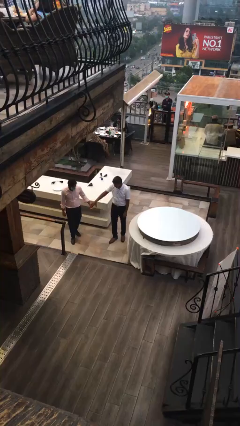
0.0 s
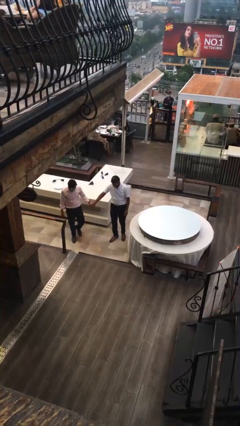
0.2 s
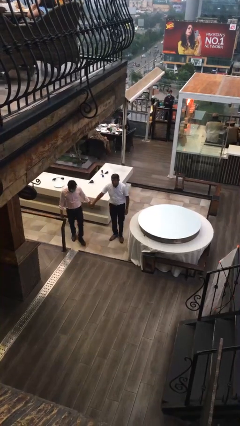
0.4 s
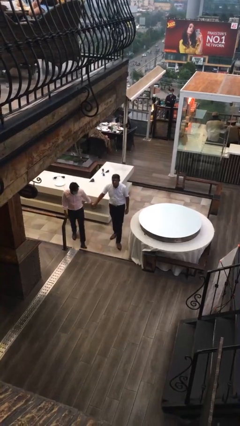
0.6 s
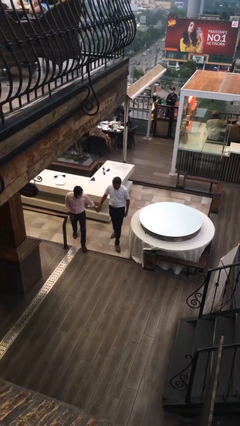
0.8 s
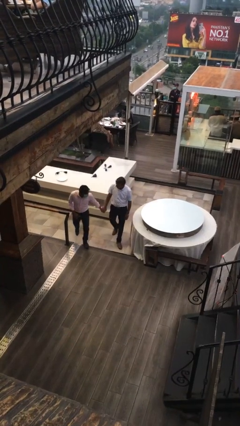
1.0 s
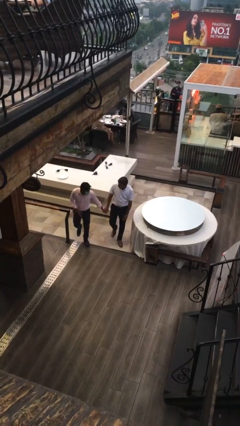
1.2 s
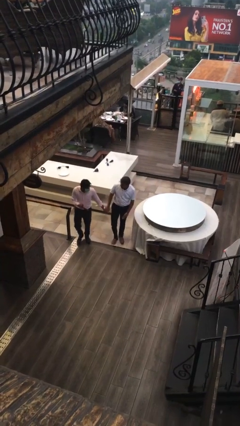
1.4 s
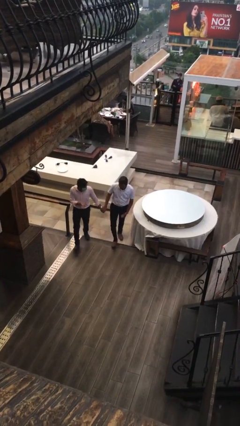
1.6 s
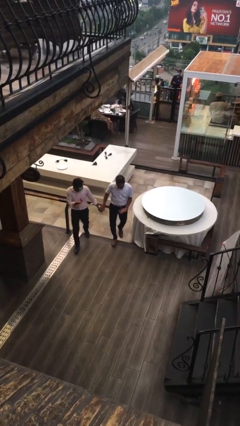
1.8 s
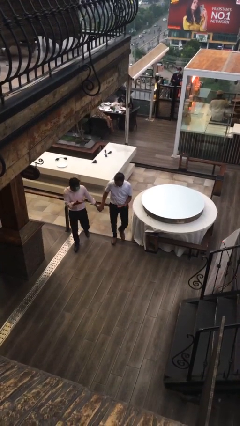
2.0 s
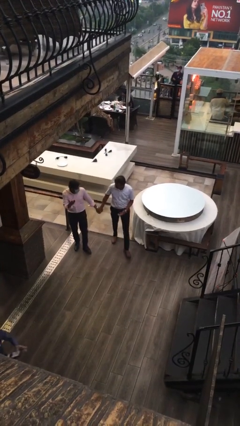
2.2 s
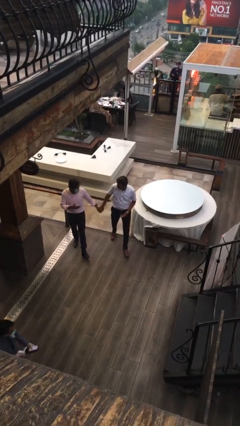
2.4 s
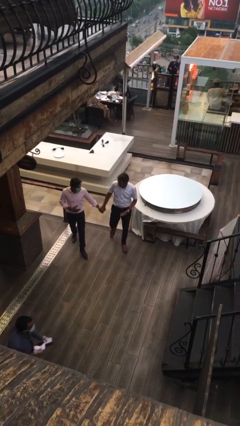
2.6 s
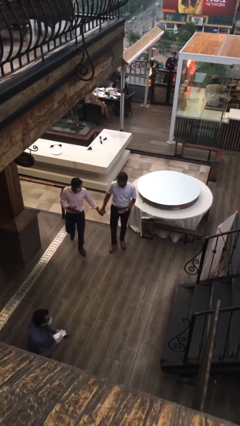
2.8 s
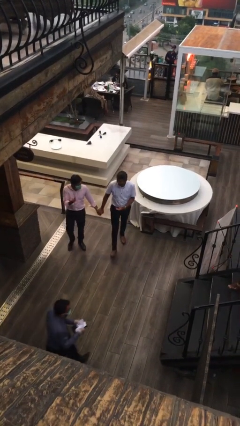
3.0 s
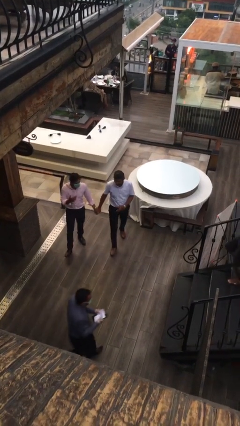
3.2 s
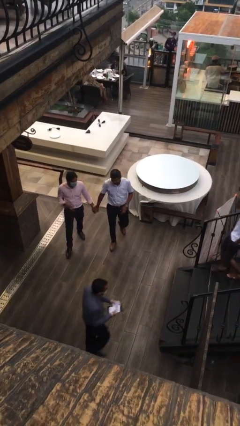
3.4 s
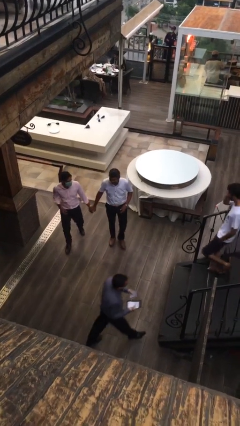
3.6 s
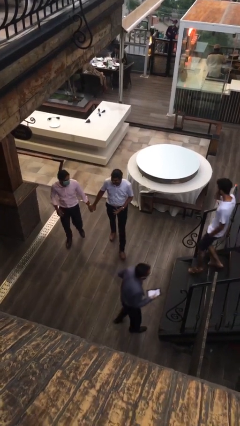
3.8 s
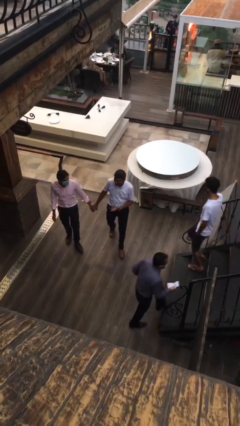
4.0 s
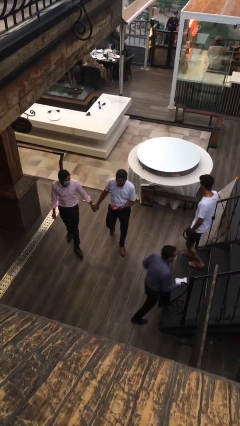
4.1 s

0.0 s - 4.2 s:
person holds hand

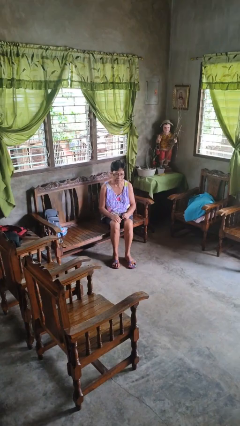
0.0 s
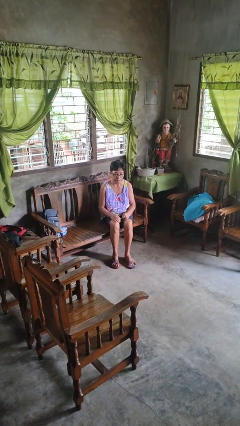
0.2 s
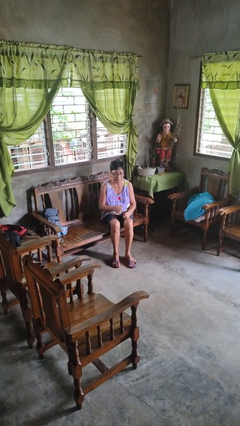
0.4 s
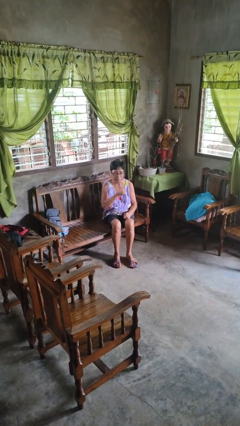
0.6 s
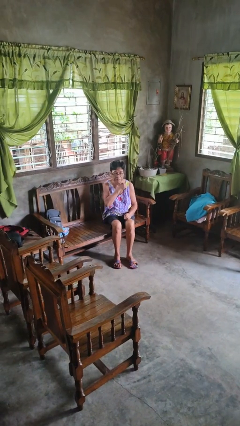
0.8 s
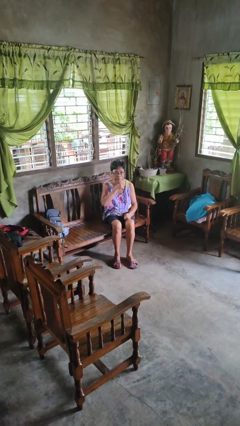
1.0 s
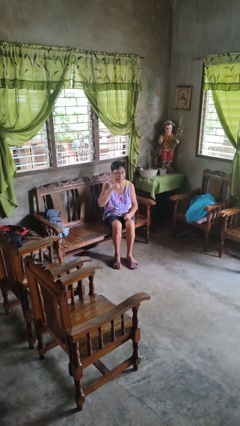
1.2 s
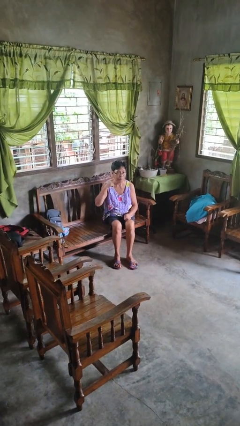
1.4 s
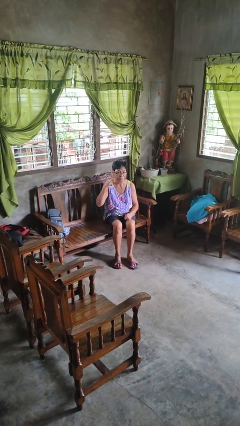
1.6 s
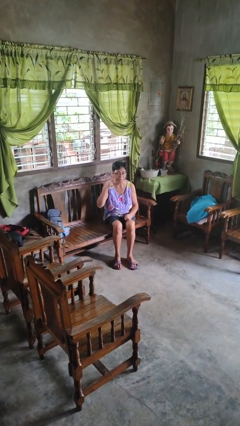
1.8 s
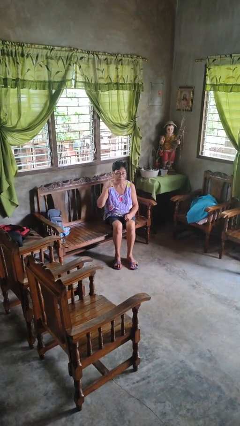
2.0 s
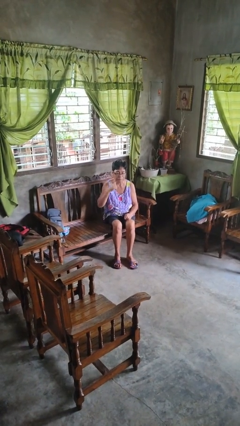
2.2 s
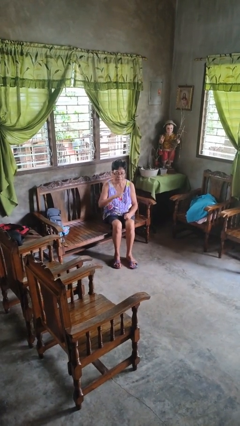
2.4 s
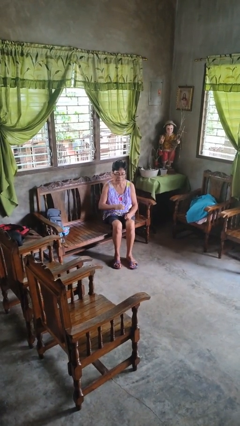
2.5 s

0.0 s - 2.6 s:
person gestures cut

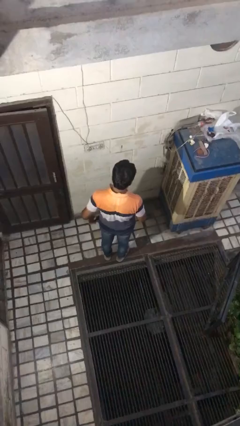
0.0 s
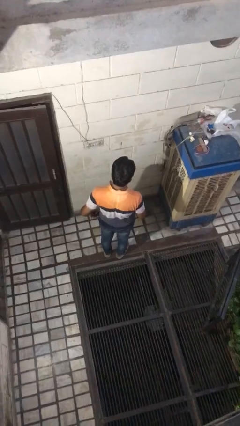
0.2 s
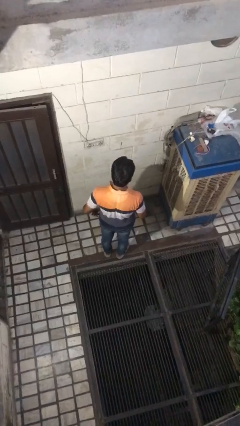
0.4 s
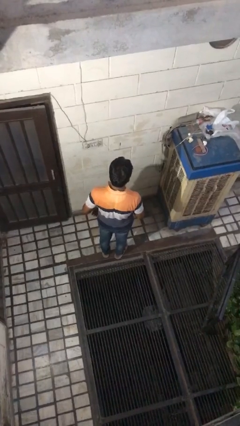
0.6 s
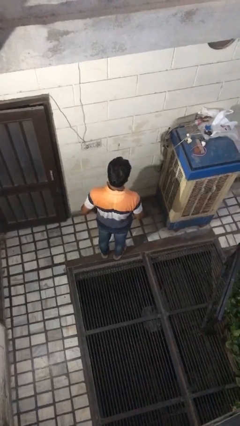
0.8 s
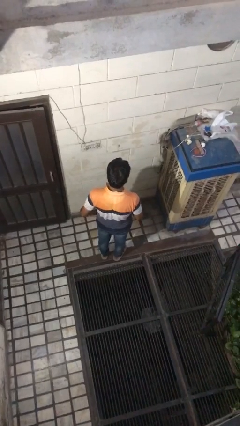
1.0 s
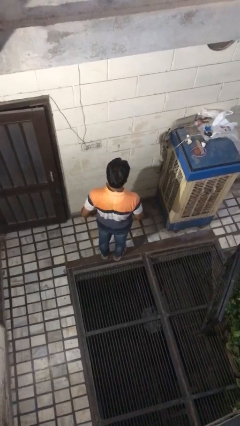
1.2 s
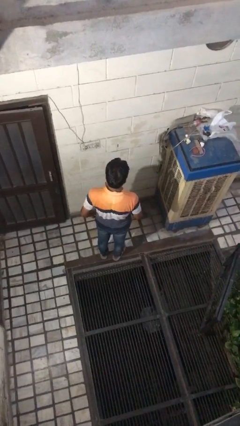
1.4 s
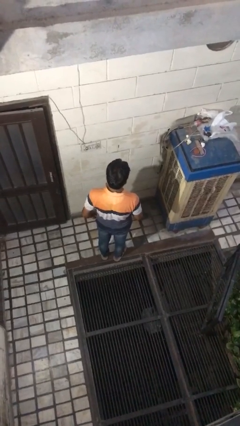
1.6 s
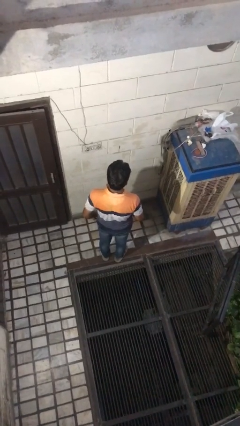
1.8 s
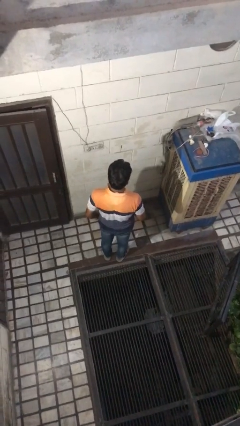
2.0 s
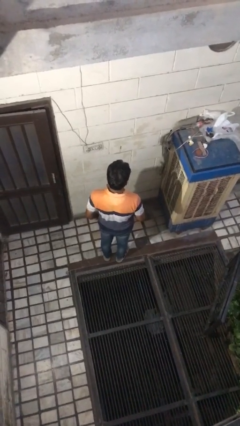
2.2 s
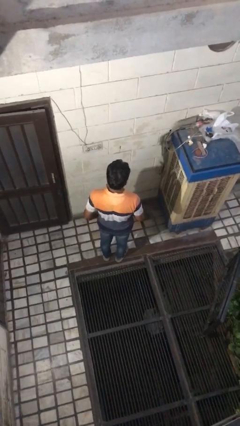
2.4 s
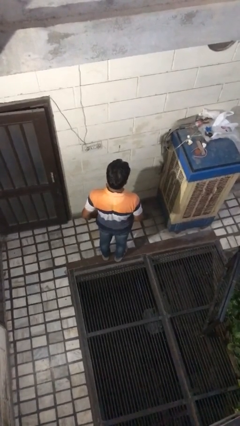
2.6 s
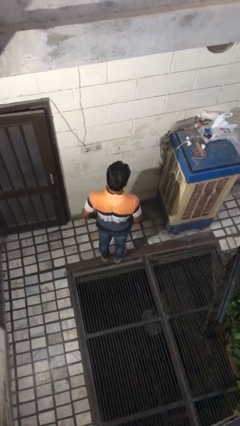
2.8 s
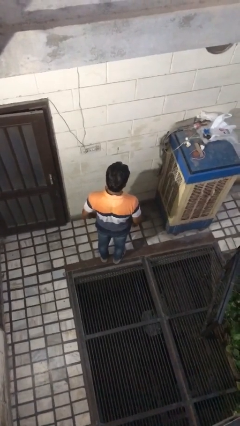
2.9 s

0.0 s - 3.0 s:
person puts phone into pocket

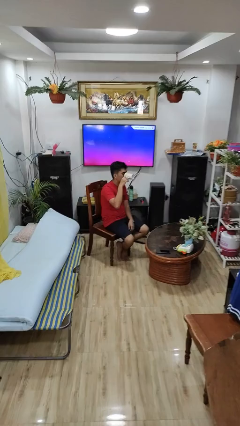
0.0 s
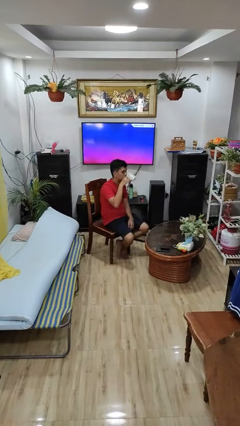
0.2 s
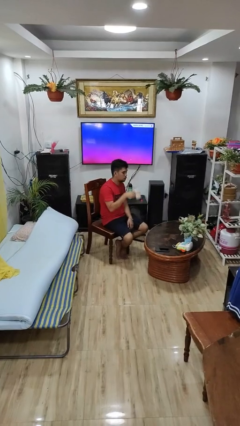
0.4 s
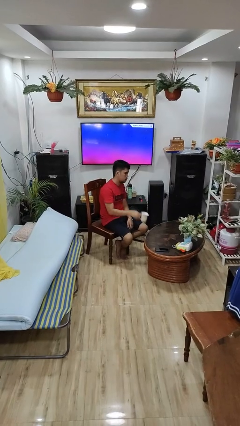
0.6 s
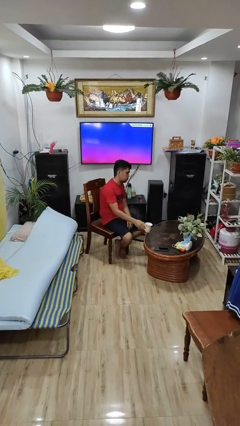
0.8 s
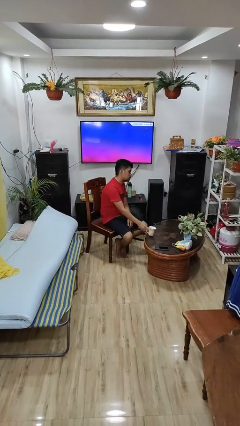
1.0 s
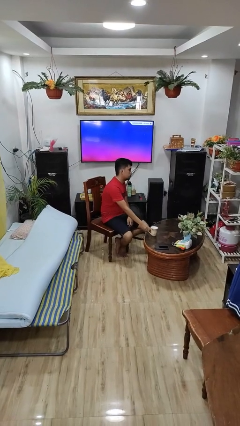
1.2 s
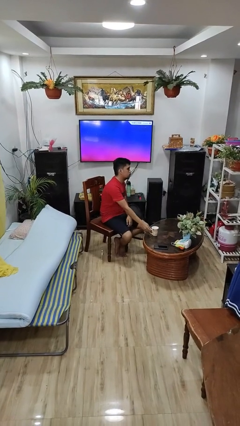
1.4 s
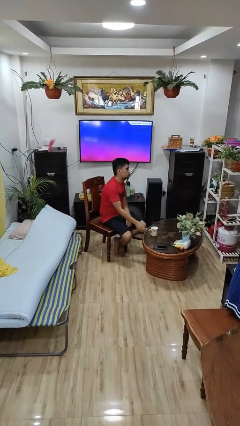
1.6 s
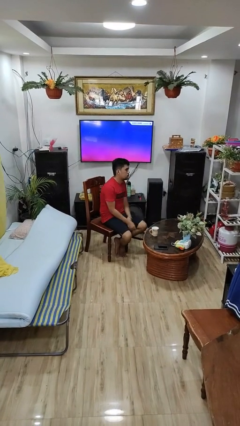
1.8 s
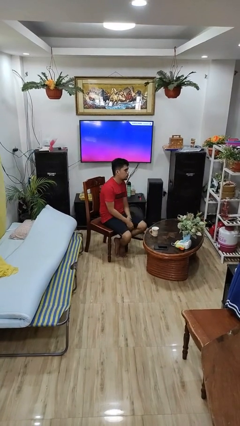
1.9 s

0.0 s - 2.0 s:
person puts down object on table

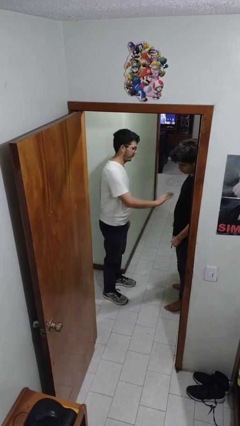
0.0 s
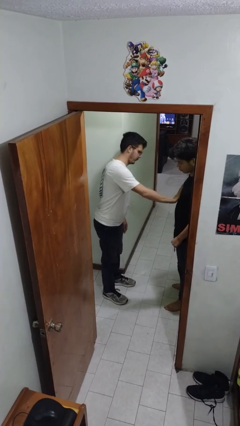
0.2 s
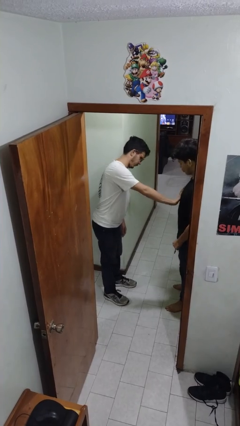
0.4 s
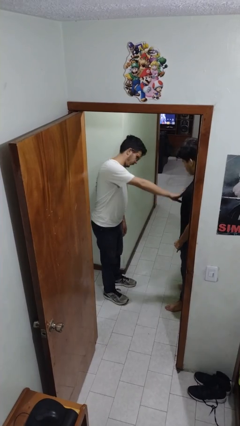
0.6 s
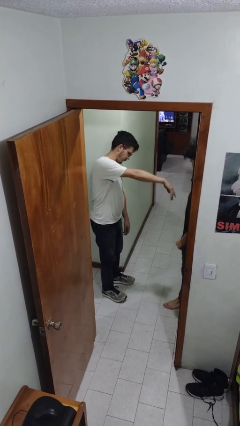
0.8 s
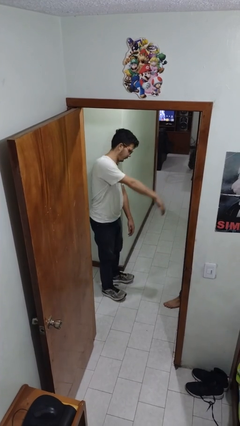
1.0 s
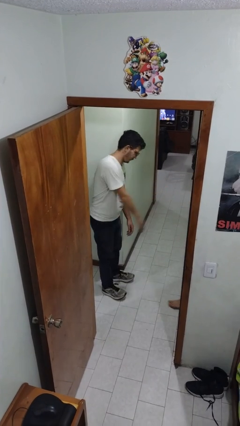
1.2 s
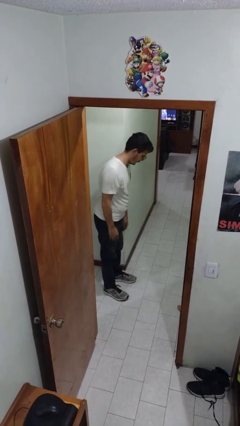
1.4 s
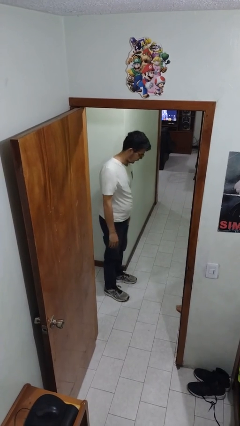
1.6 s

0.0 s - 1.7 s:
person shoves person

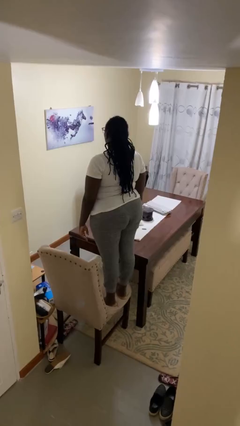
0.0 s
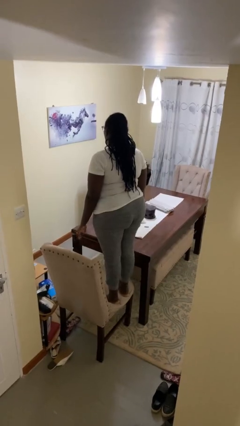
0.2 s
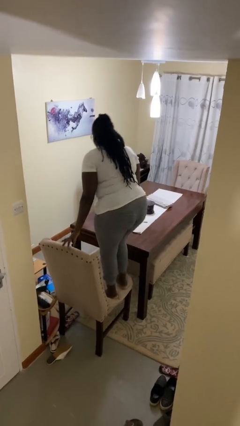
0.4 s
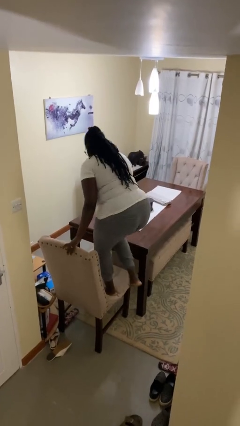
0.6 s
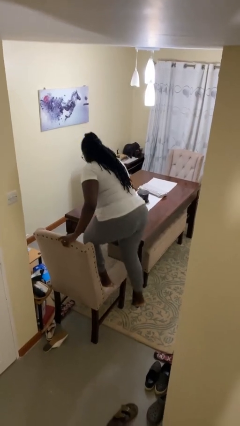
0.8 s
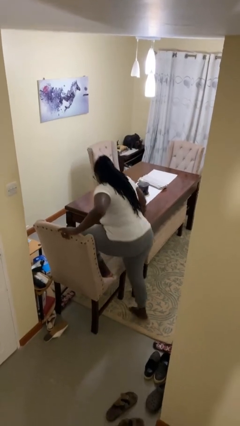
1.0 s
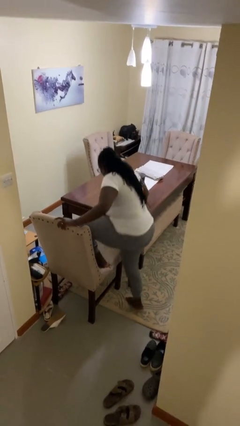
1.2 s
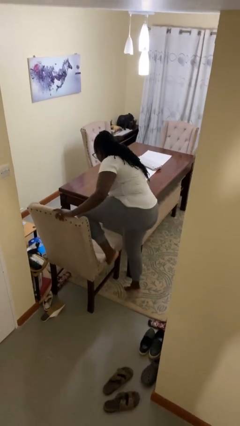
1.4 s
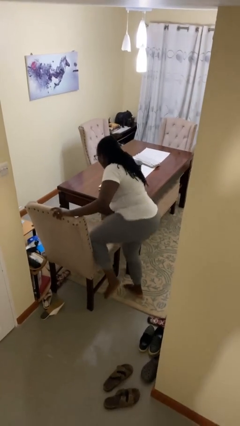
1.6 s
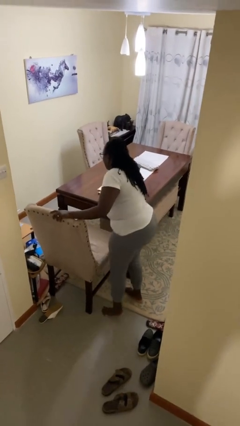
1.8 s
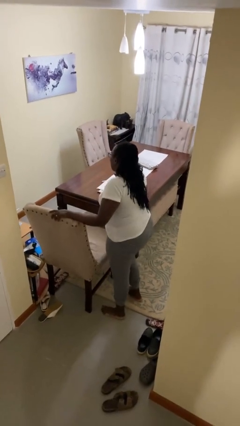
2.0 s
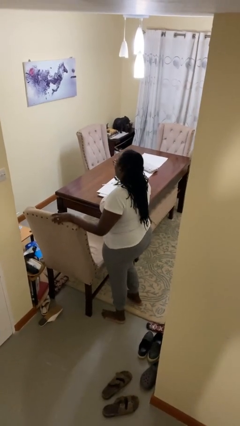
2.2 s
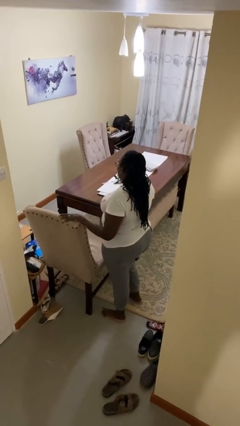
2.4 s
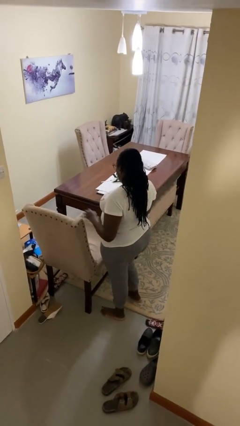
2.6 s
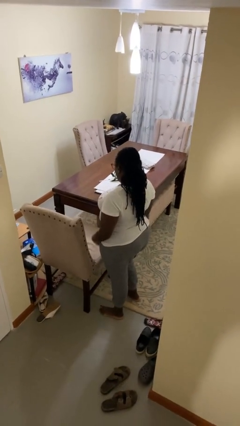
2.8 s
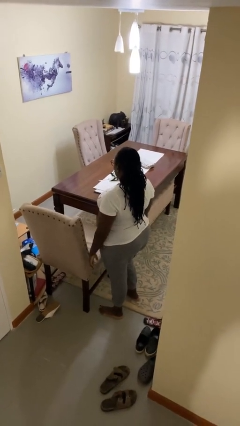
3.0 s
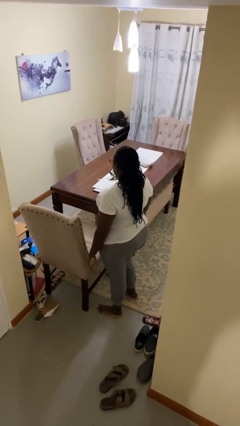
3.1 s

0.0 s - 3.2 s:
person climbs off chair

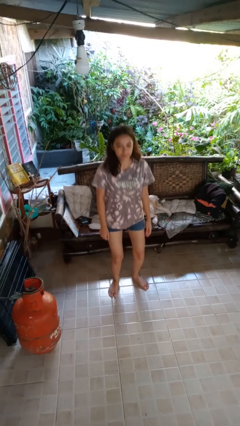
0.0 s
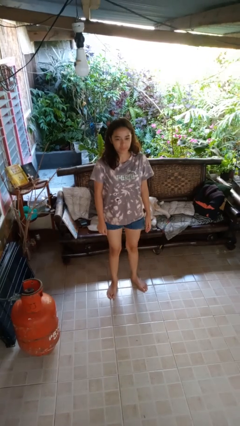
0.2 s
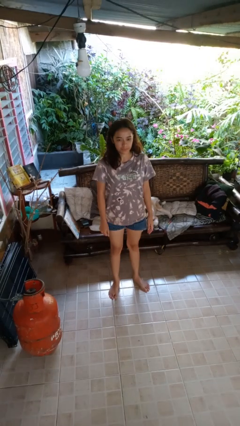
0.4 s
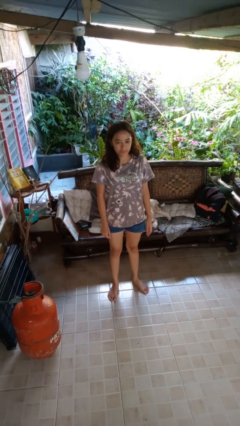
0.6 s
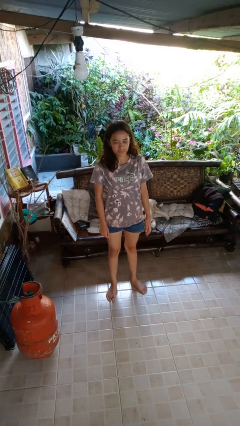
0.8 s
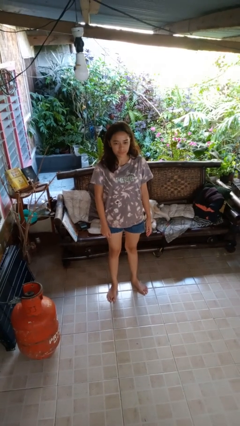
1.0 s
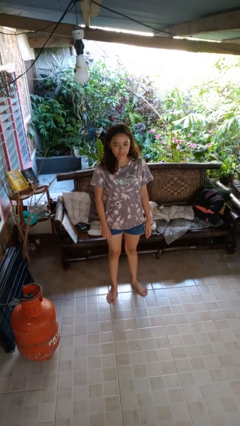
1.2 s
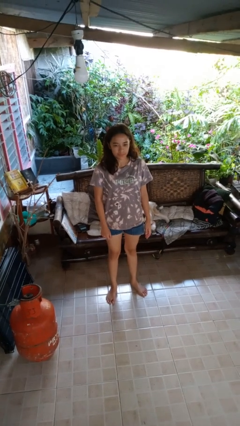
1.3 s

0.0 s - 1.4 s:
person stands up
